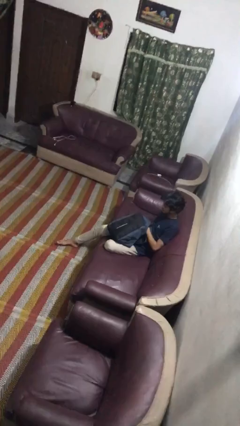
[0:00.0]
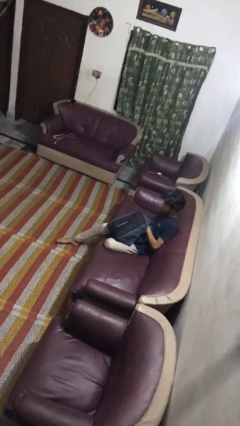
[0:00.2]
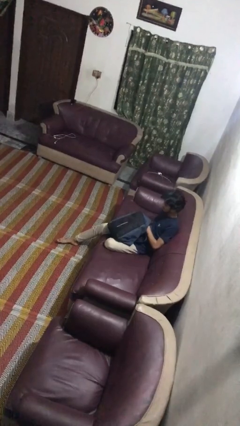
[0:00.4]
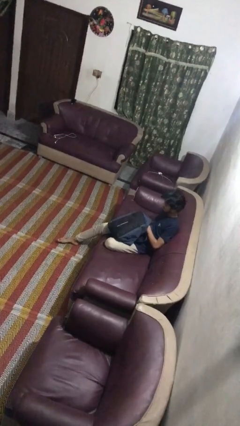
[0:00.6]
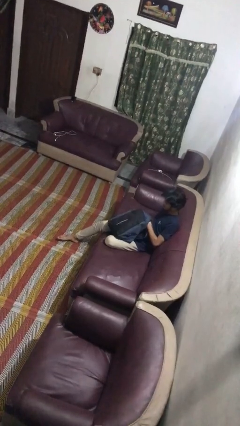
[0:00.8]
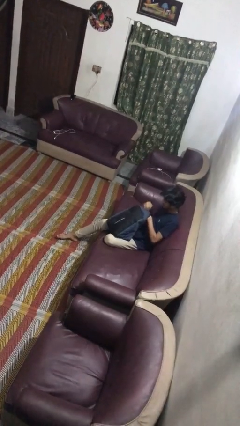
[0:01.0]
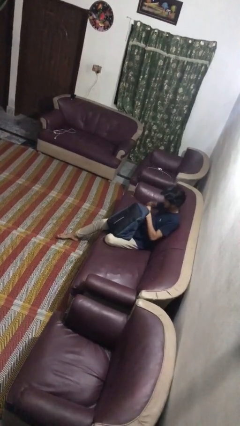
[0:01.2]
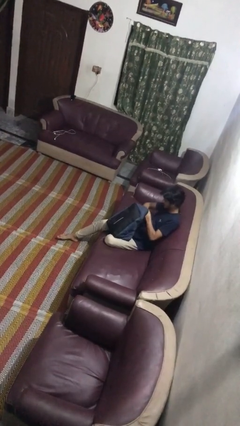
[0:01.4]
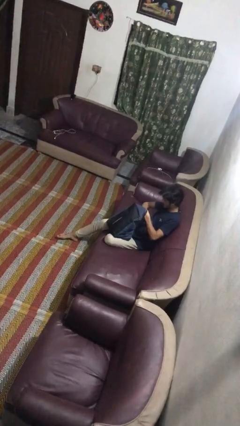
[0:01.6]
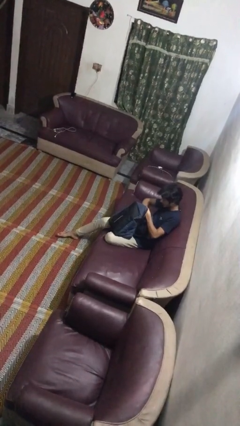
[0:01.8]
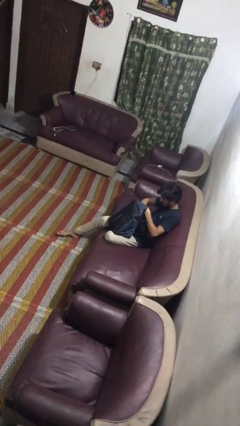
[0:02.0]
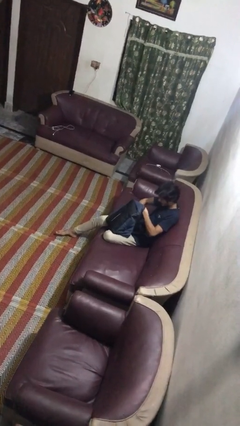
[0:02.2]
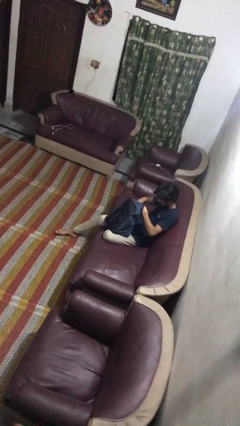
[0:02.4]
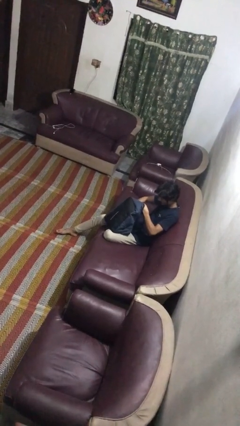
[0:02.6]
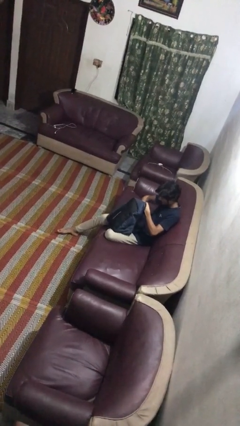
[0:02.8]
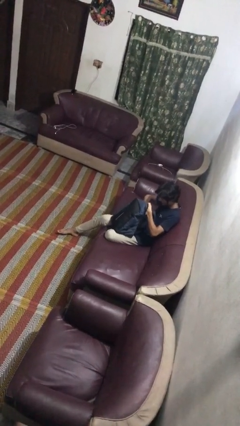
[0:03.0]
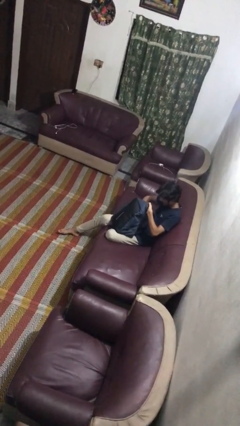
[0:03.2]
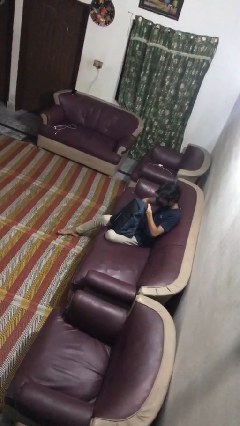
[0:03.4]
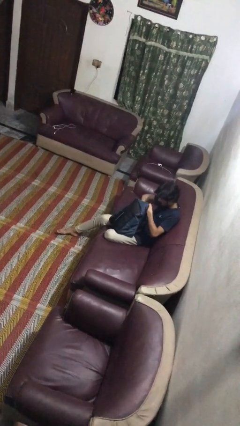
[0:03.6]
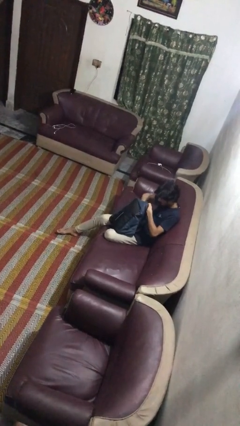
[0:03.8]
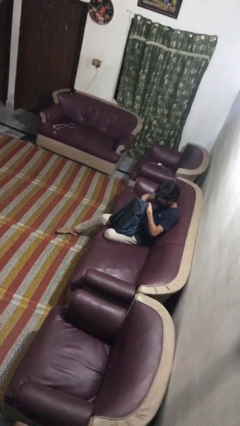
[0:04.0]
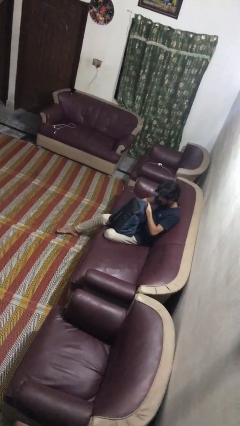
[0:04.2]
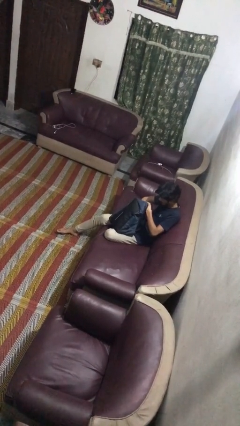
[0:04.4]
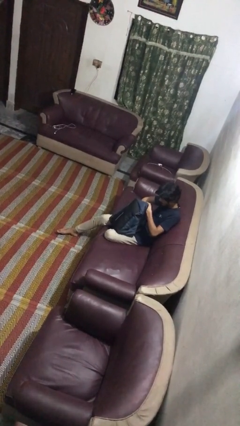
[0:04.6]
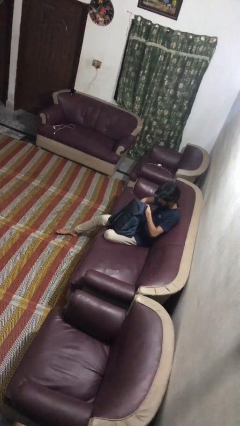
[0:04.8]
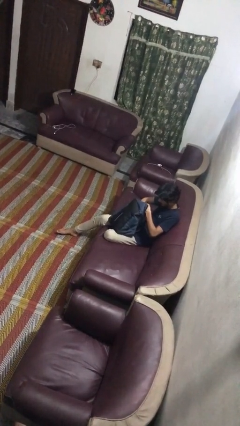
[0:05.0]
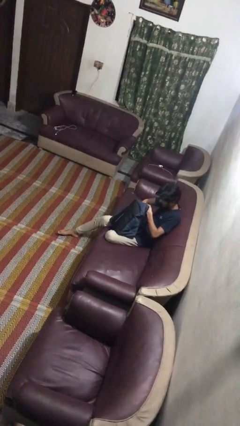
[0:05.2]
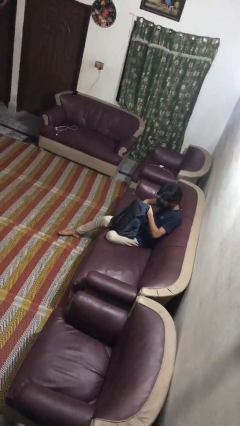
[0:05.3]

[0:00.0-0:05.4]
person searches in backpack

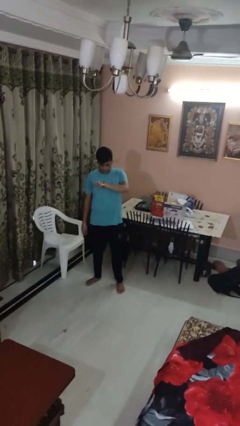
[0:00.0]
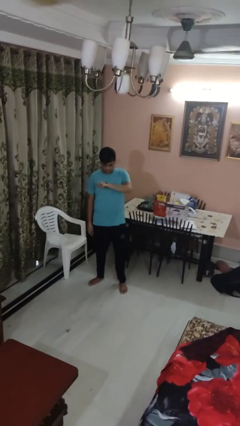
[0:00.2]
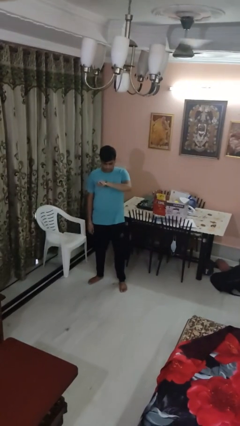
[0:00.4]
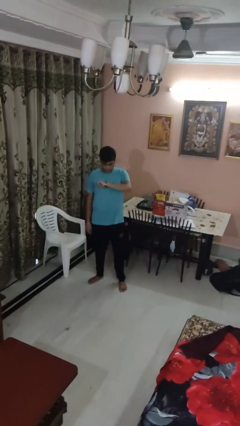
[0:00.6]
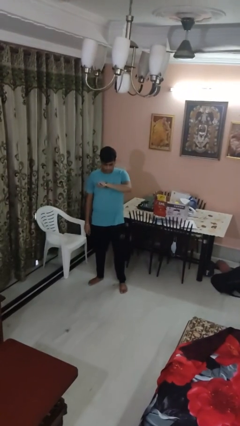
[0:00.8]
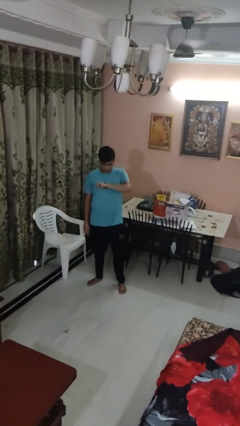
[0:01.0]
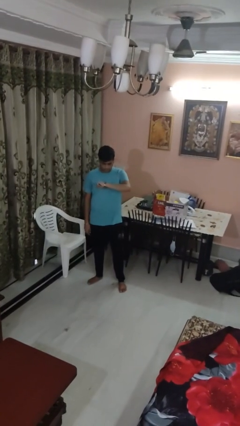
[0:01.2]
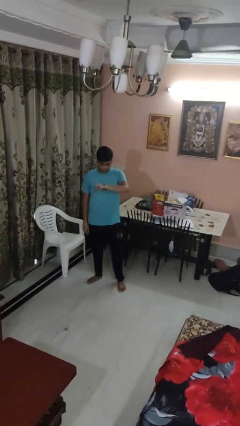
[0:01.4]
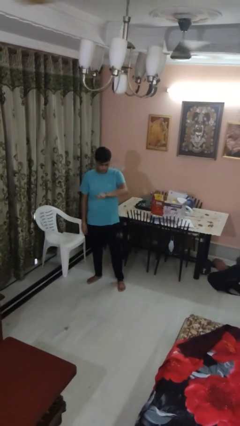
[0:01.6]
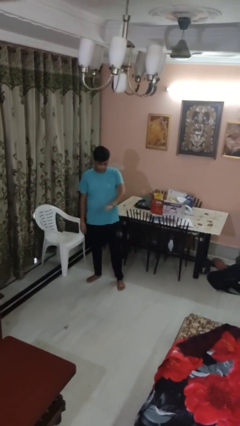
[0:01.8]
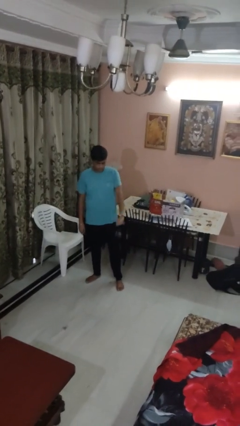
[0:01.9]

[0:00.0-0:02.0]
person looks at wristwatch

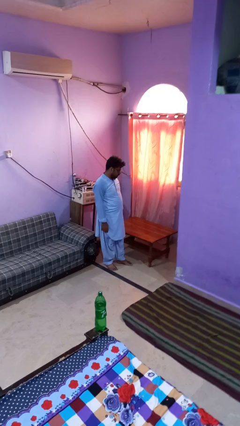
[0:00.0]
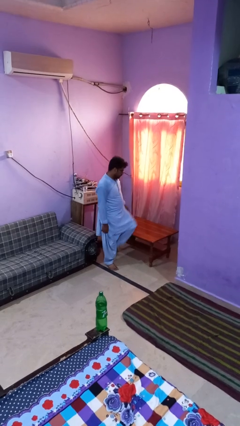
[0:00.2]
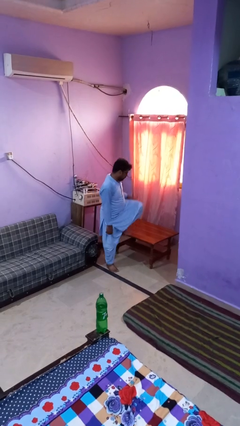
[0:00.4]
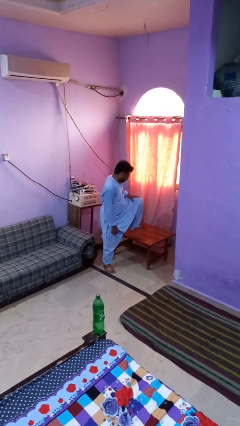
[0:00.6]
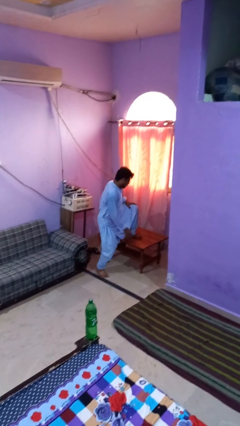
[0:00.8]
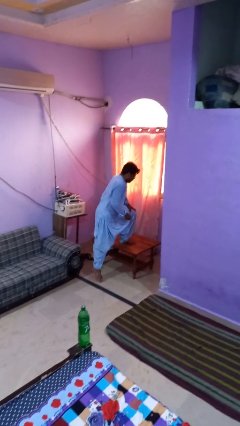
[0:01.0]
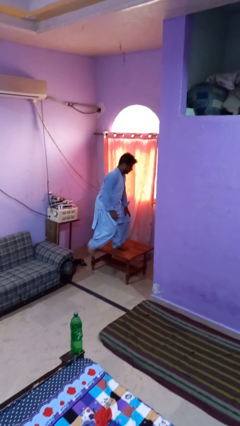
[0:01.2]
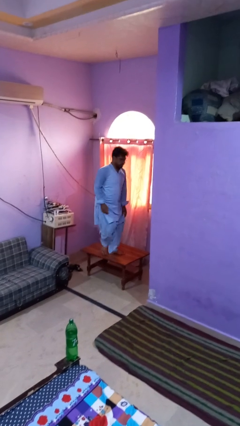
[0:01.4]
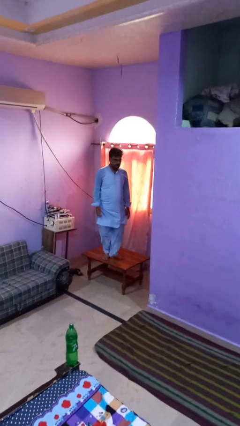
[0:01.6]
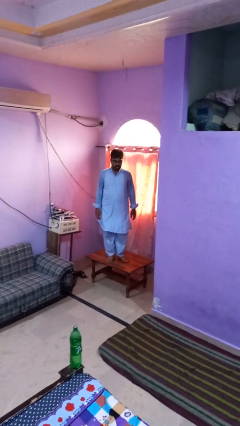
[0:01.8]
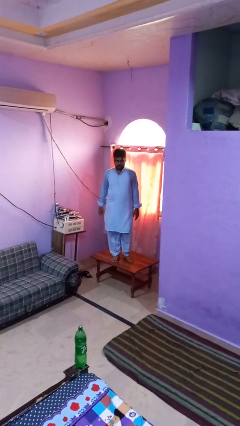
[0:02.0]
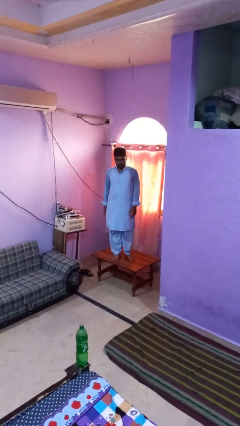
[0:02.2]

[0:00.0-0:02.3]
person climbs on table

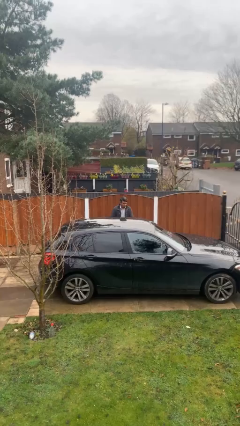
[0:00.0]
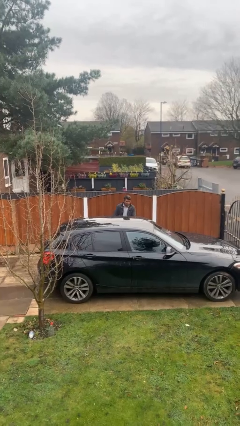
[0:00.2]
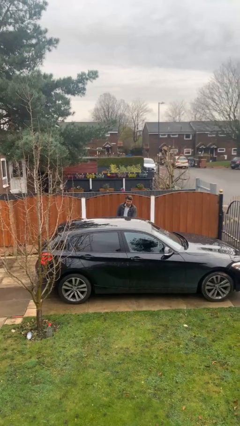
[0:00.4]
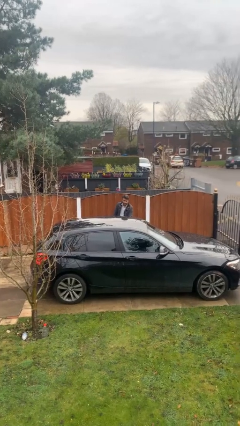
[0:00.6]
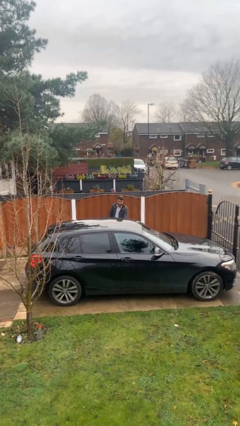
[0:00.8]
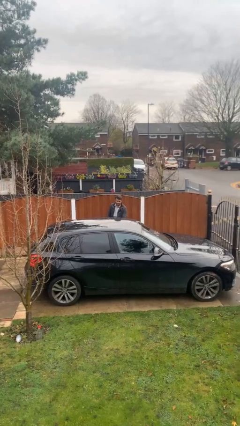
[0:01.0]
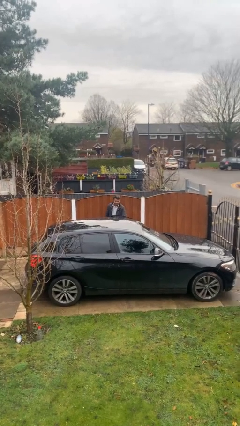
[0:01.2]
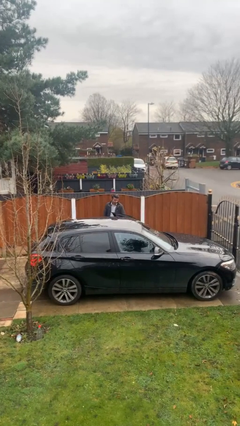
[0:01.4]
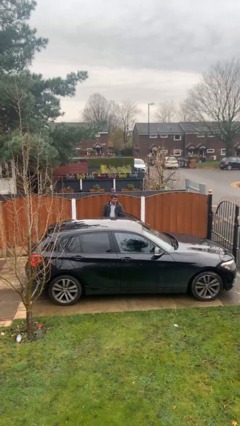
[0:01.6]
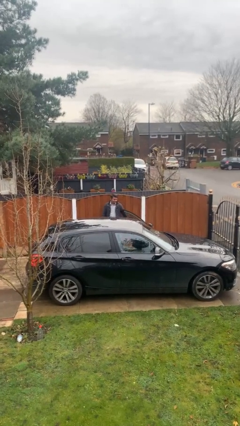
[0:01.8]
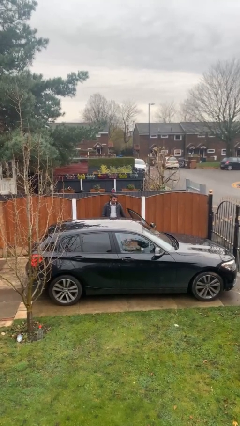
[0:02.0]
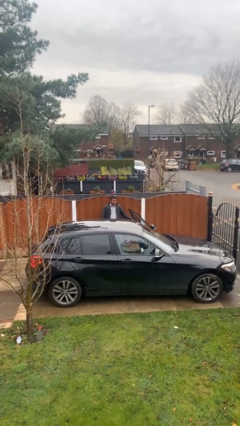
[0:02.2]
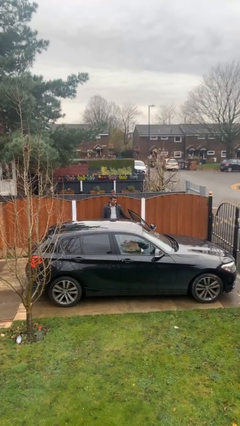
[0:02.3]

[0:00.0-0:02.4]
person opens car door

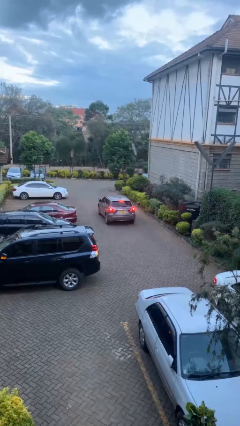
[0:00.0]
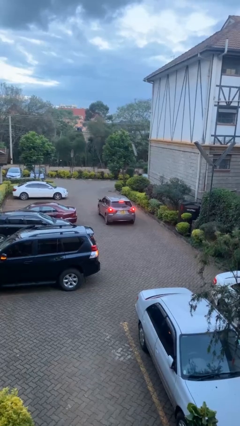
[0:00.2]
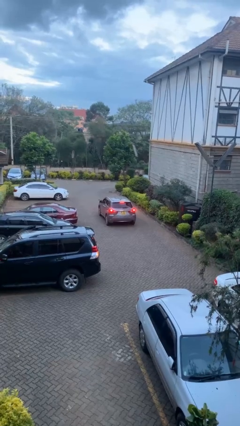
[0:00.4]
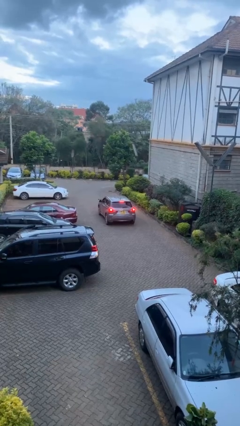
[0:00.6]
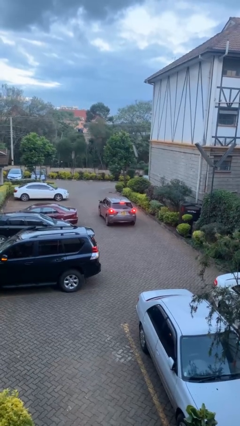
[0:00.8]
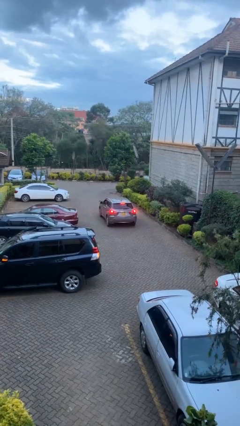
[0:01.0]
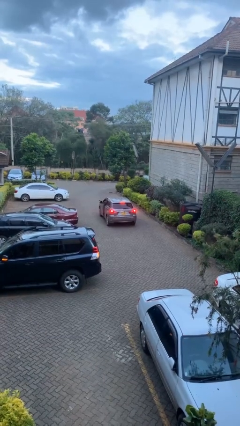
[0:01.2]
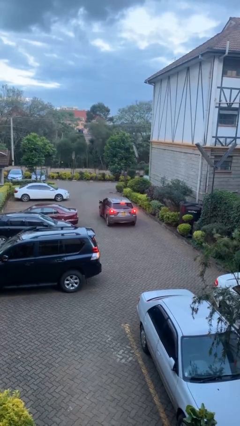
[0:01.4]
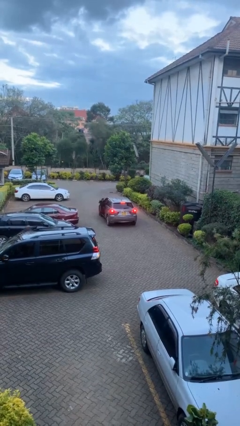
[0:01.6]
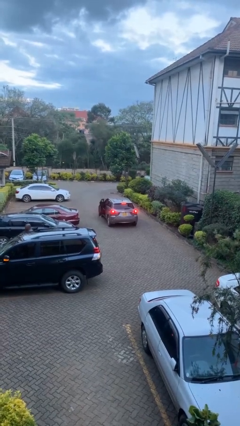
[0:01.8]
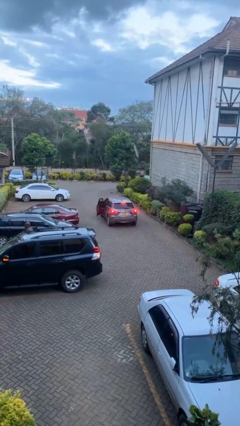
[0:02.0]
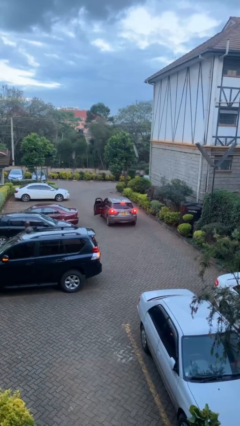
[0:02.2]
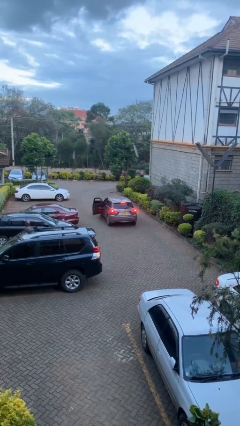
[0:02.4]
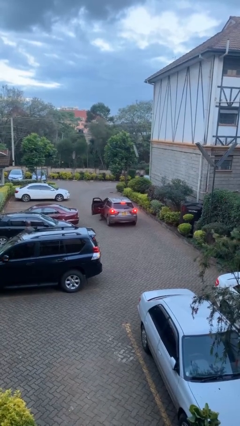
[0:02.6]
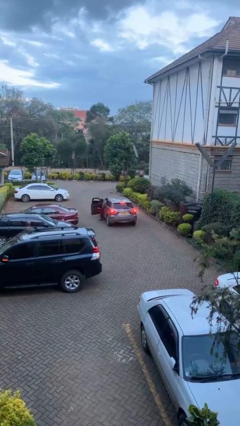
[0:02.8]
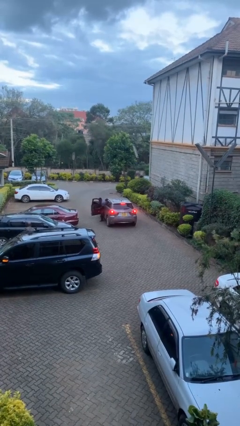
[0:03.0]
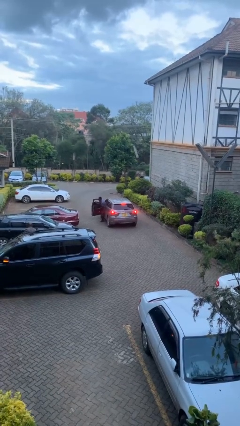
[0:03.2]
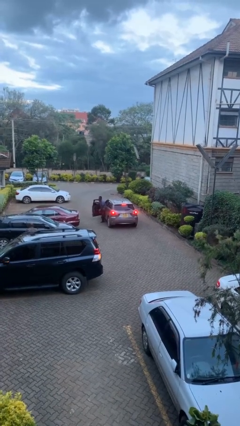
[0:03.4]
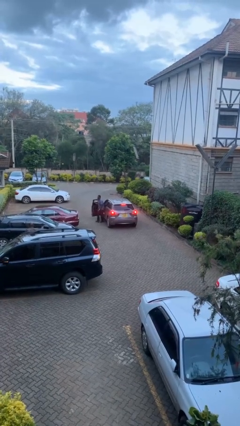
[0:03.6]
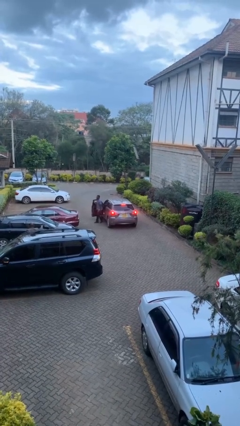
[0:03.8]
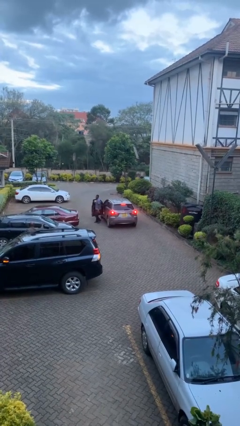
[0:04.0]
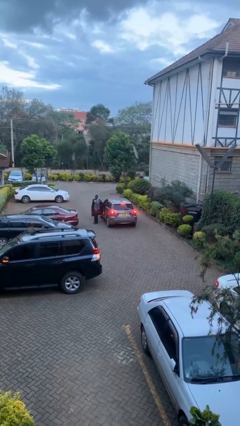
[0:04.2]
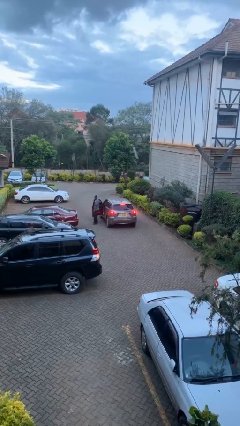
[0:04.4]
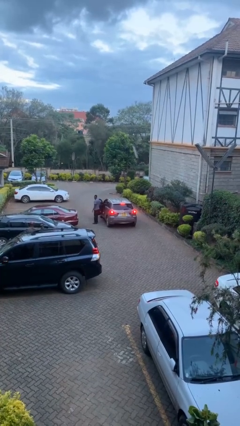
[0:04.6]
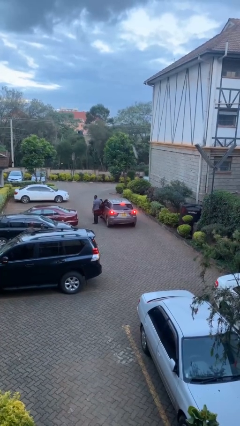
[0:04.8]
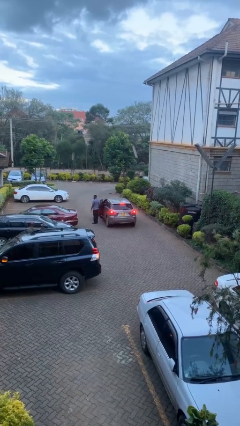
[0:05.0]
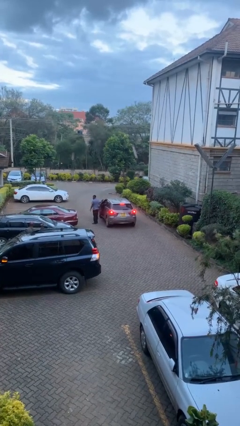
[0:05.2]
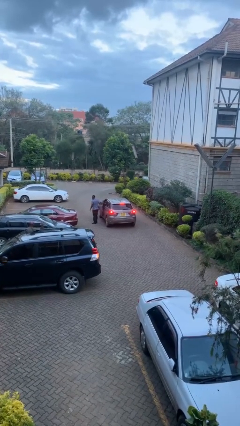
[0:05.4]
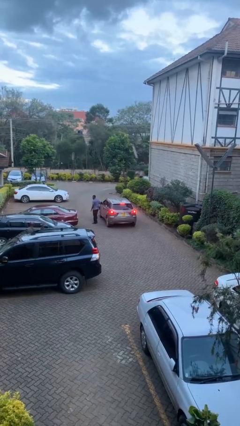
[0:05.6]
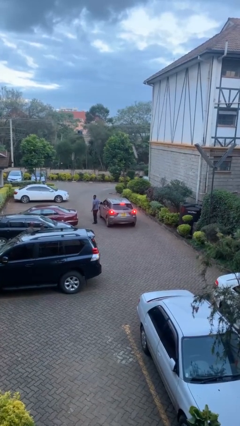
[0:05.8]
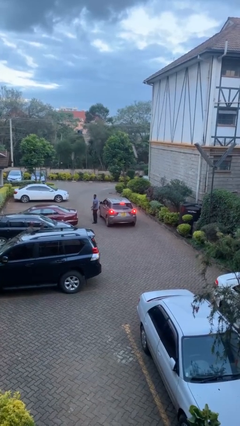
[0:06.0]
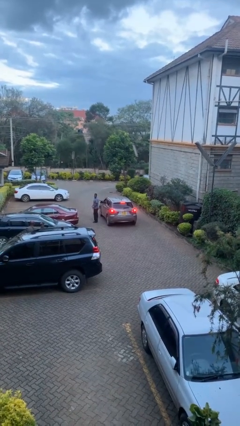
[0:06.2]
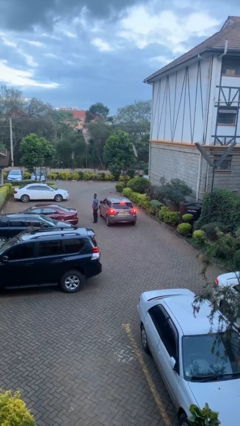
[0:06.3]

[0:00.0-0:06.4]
car drops off person
